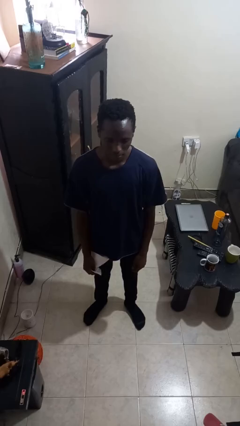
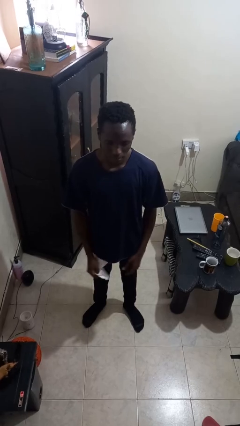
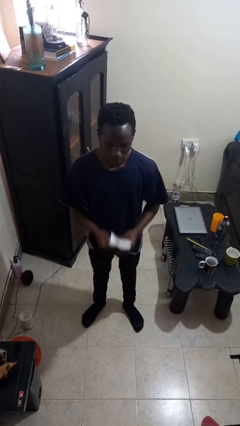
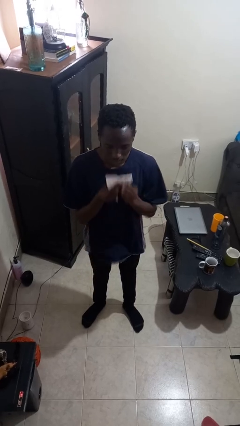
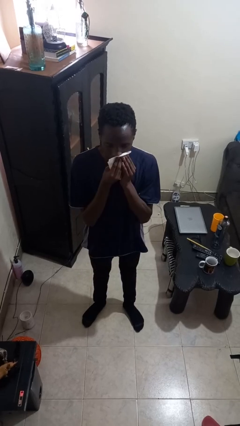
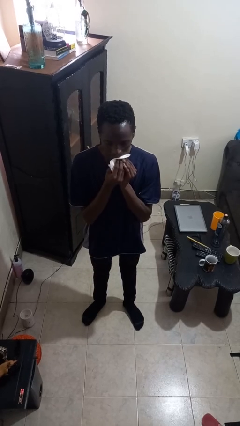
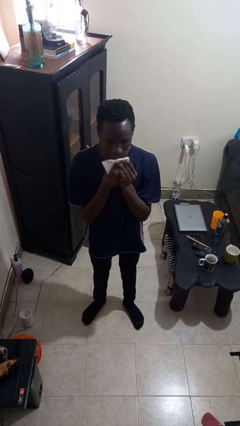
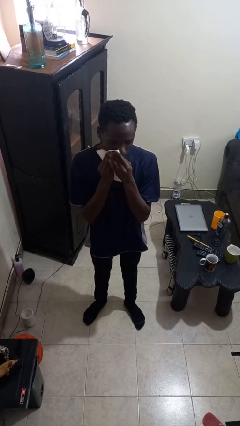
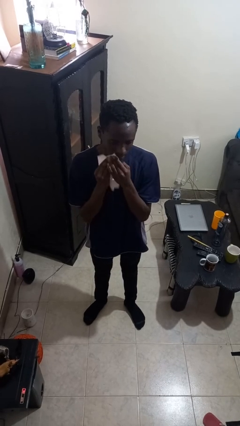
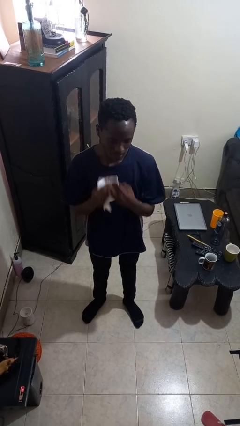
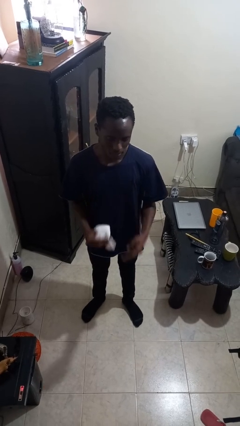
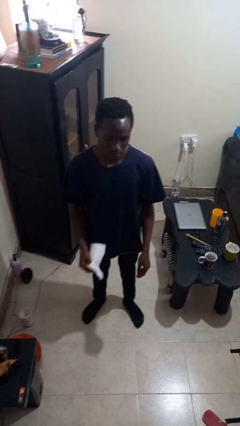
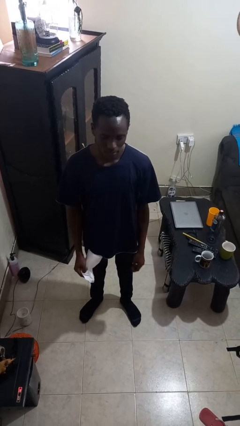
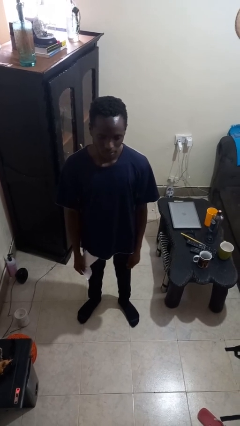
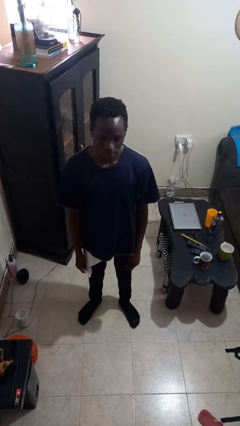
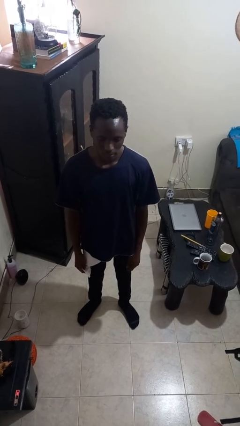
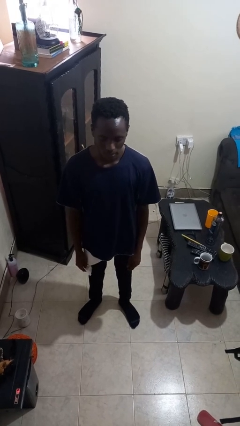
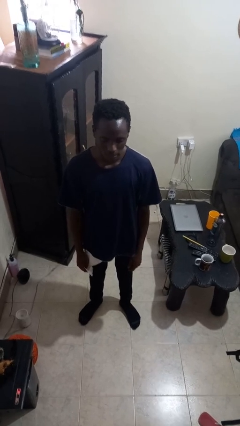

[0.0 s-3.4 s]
person wipes mouth with napkin

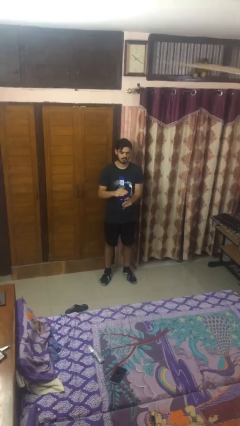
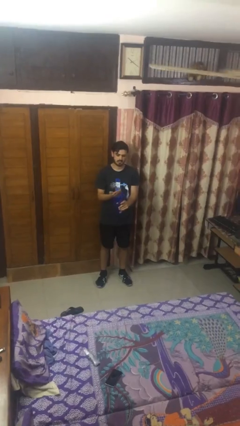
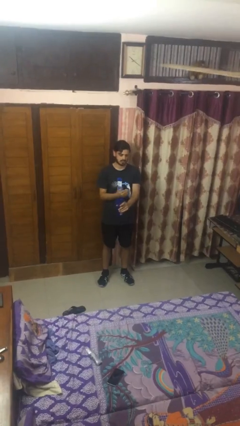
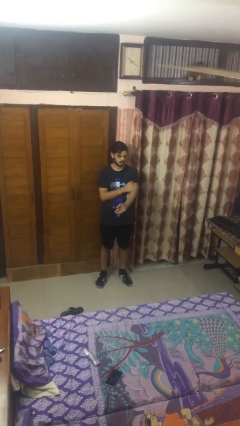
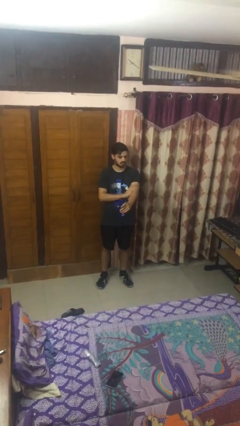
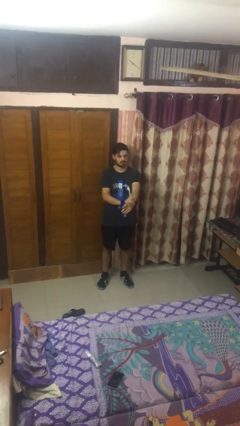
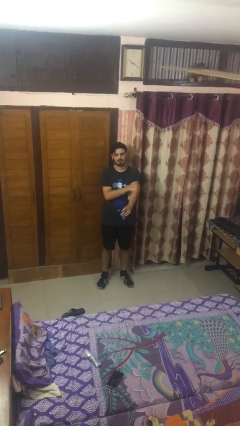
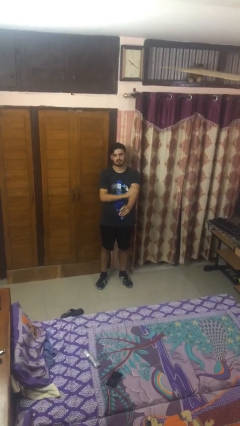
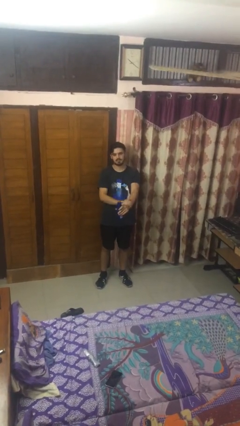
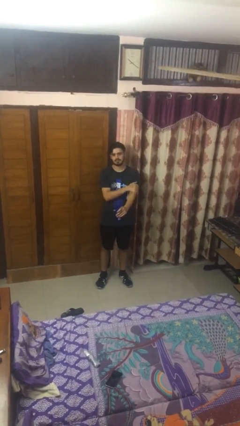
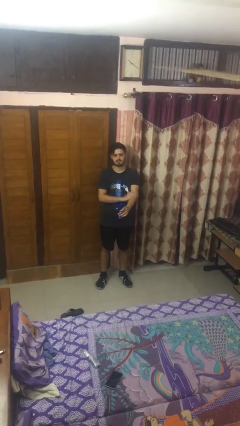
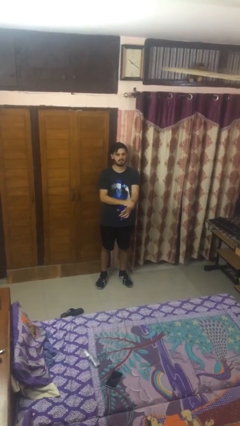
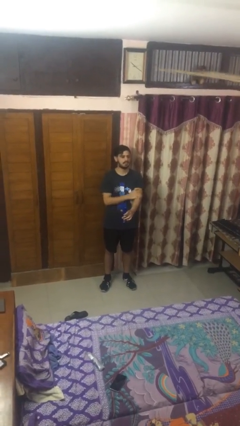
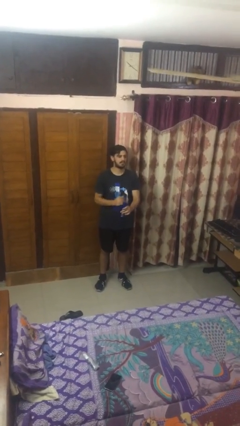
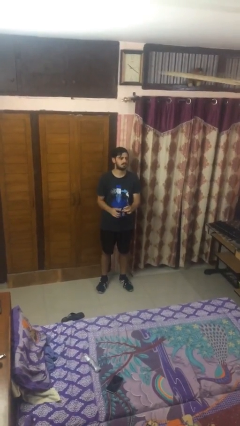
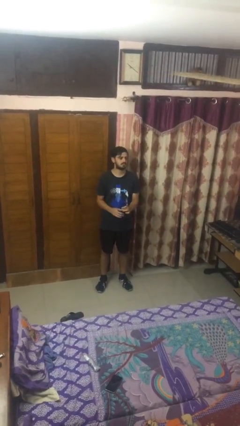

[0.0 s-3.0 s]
person applies sunscreen

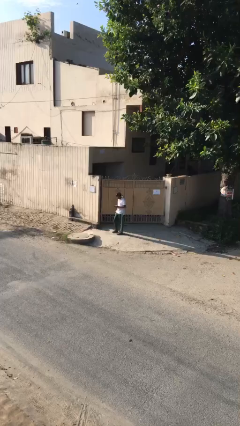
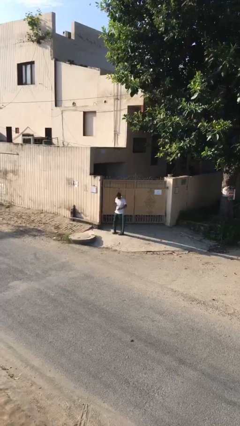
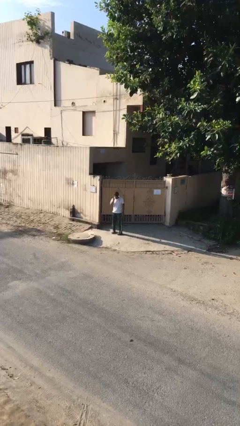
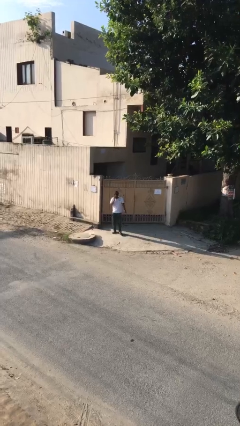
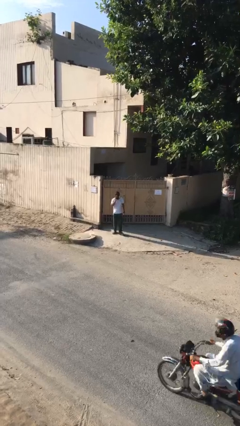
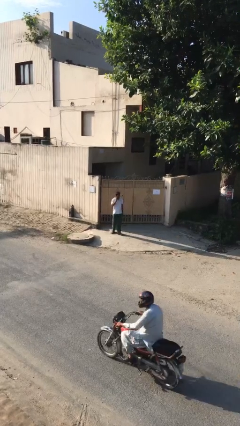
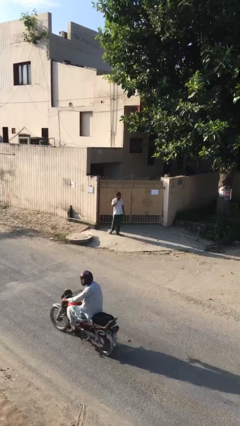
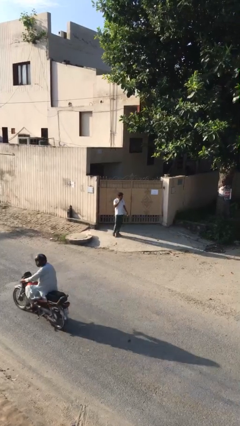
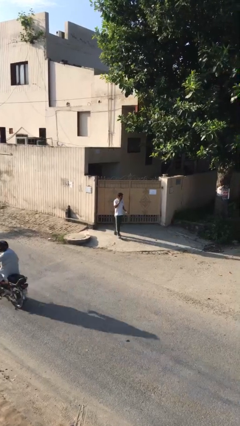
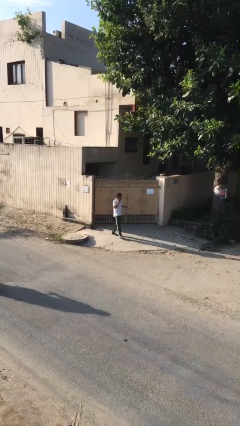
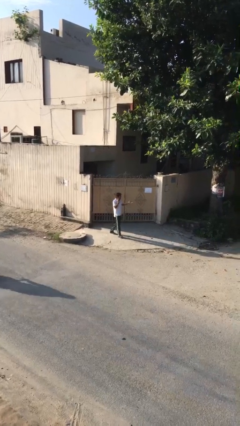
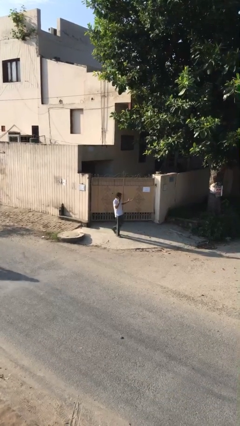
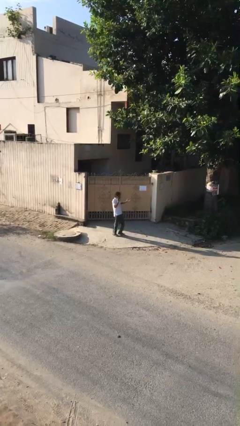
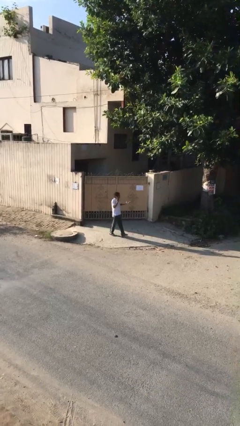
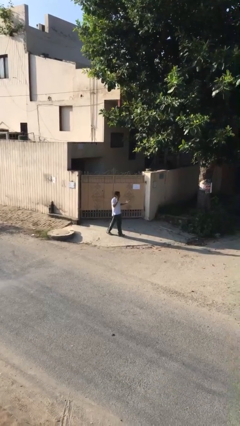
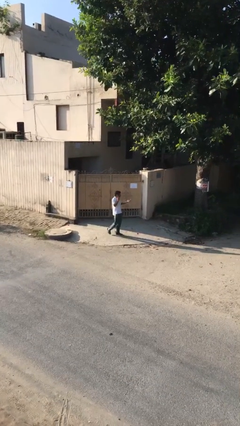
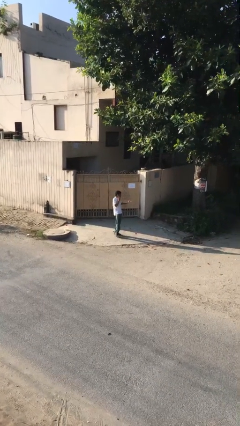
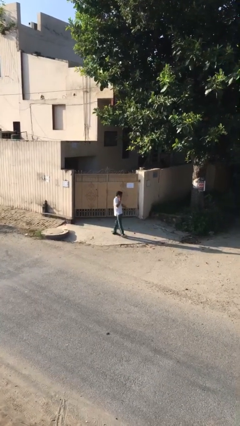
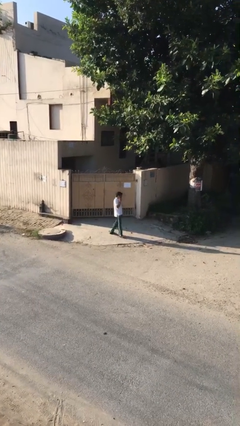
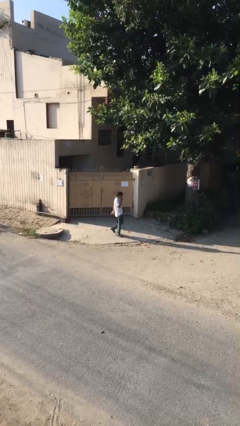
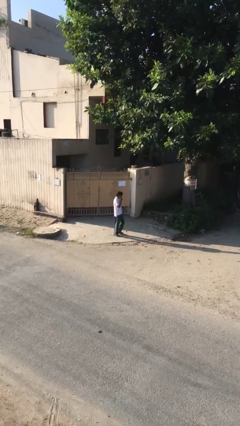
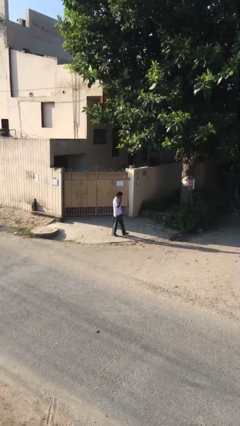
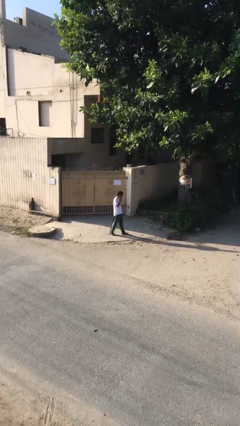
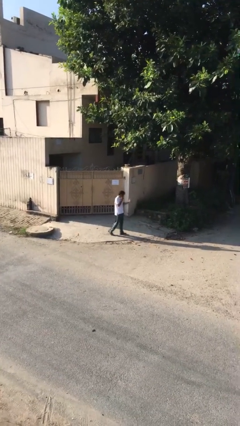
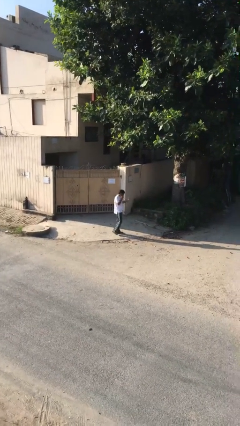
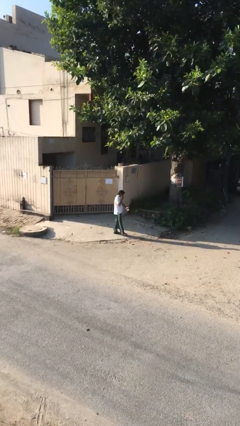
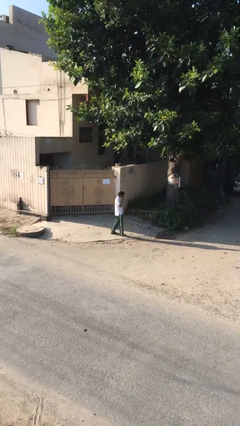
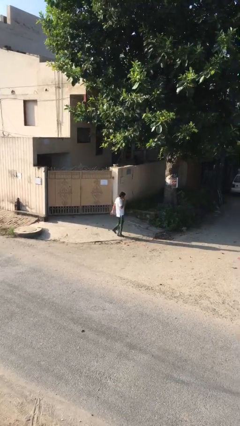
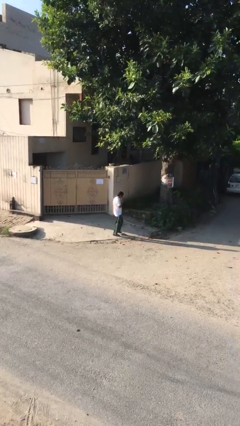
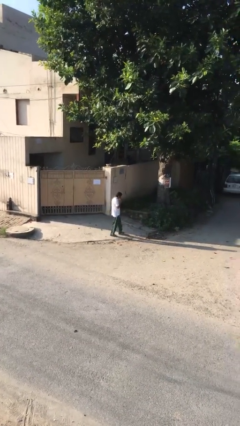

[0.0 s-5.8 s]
person talks on phone

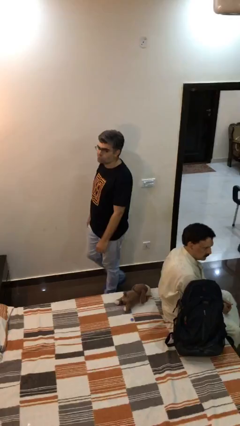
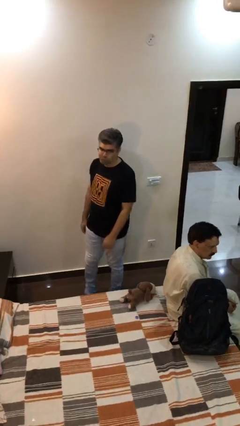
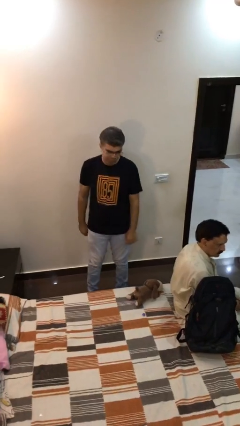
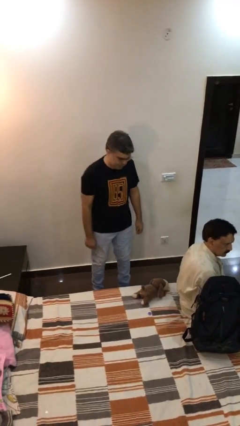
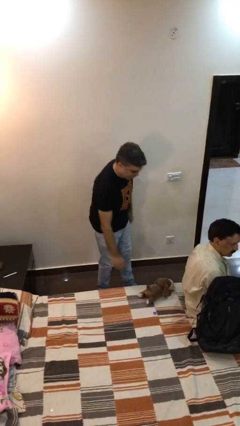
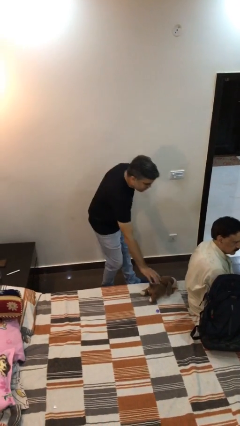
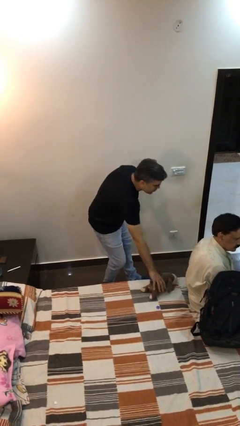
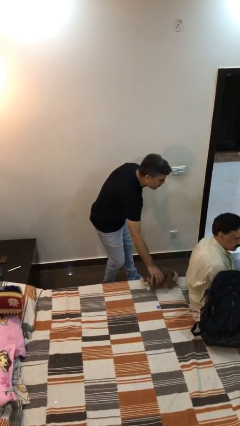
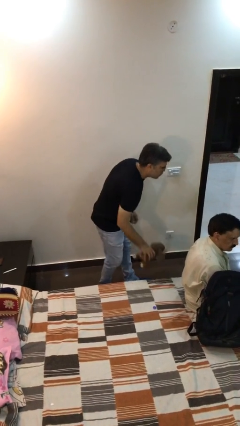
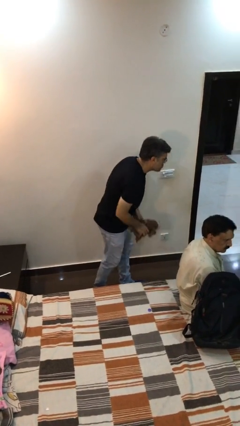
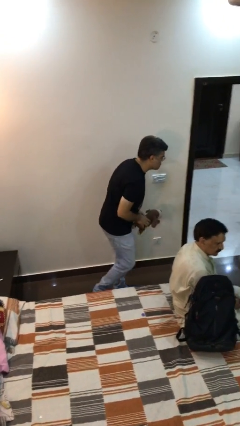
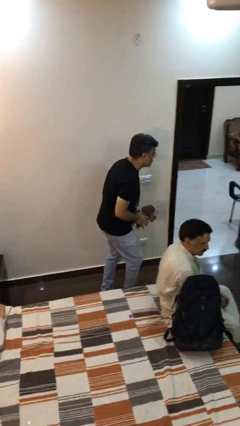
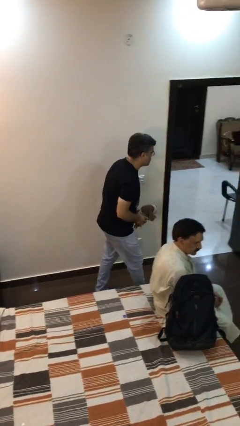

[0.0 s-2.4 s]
person steals object from person

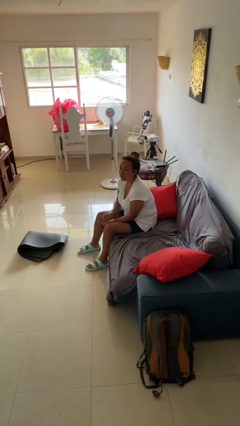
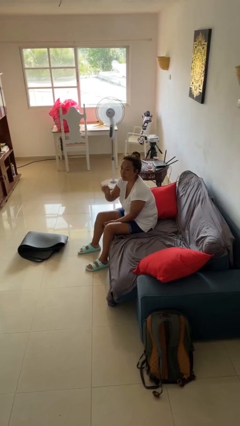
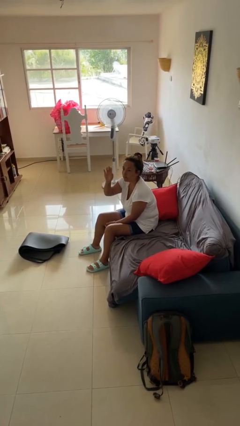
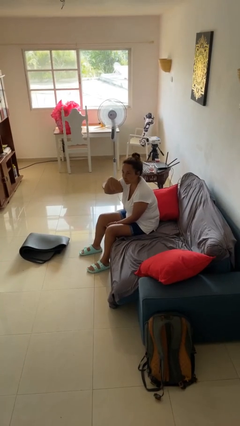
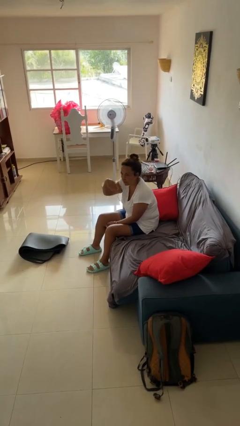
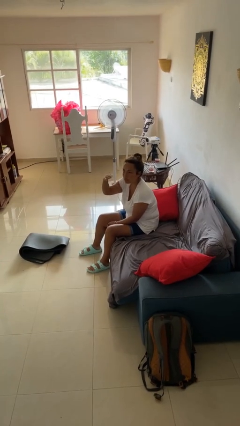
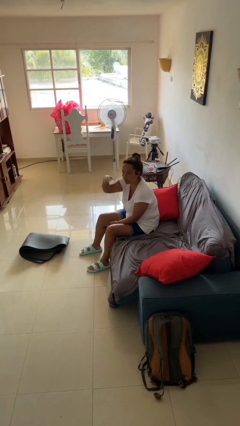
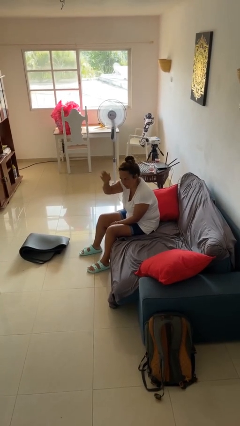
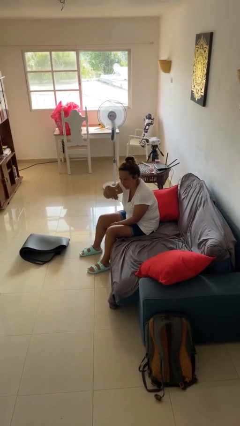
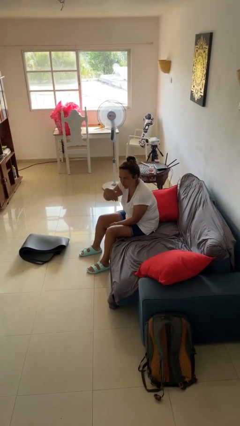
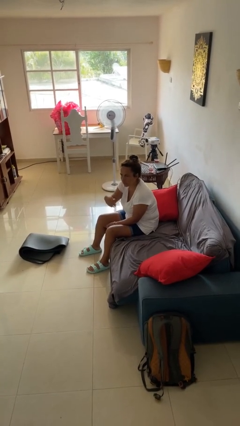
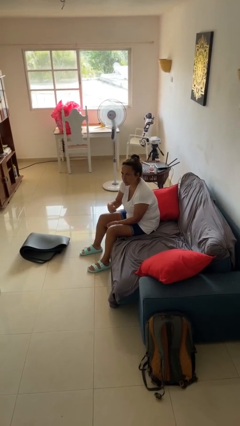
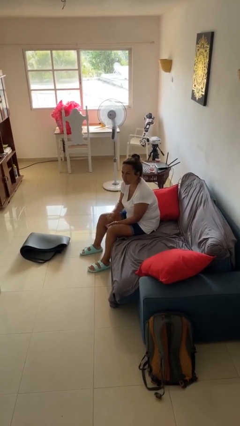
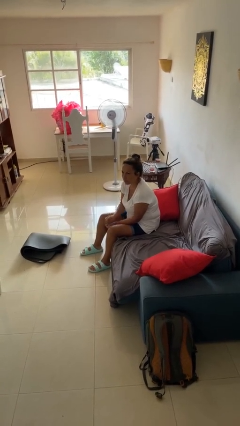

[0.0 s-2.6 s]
person gestures come here

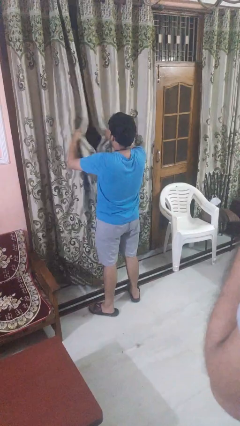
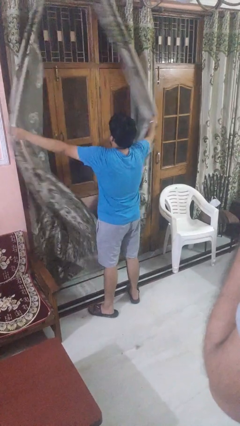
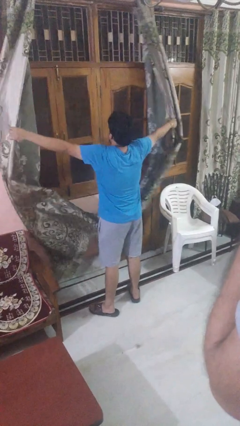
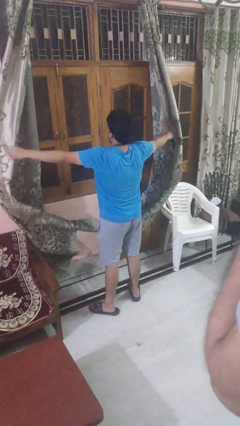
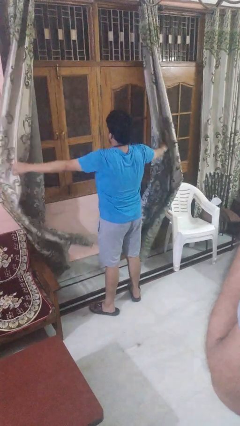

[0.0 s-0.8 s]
person opens curtains
